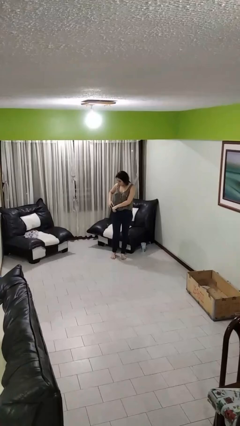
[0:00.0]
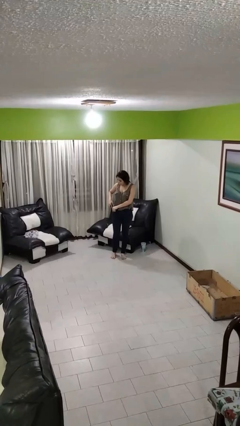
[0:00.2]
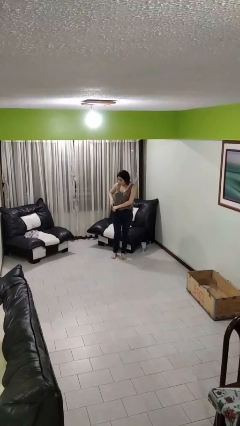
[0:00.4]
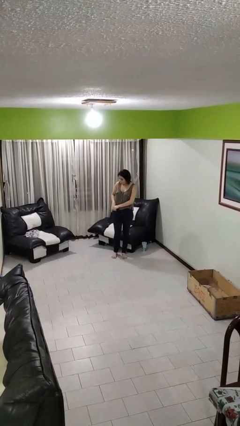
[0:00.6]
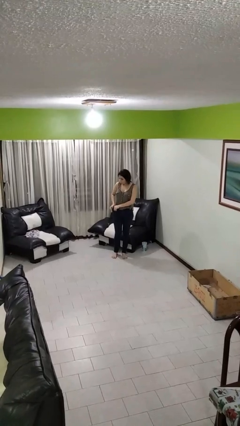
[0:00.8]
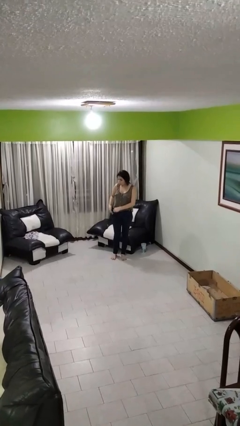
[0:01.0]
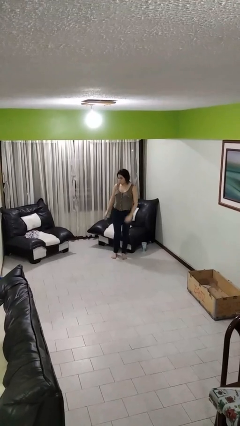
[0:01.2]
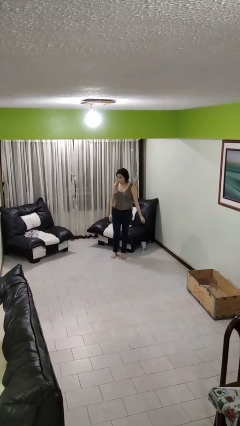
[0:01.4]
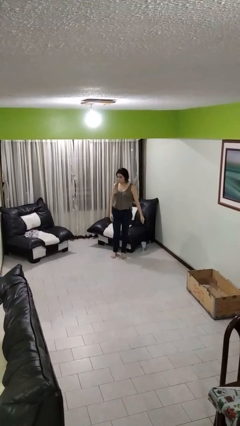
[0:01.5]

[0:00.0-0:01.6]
person puts phone into pocket

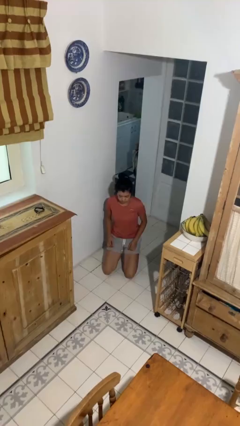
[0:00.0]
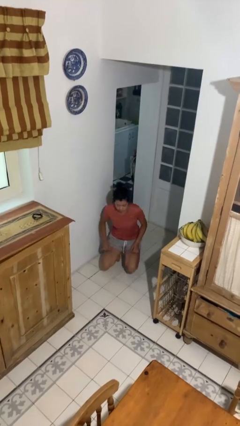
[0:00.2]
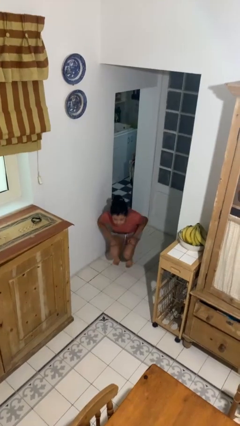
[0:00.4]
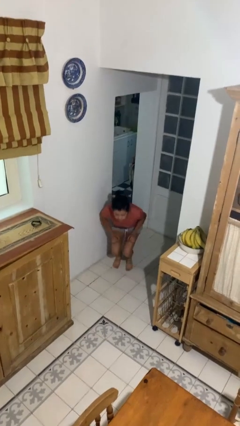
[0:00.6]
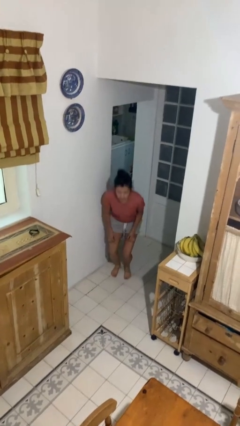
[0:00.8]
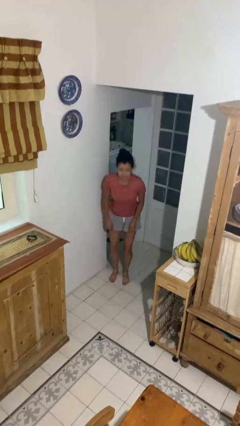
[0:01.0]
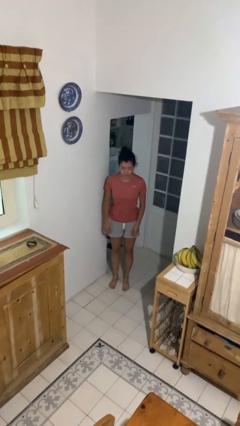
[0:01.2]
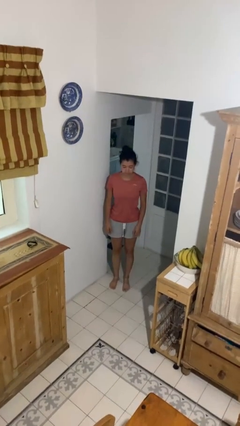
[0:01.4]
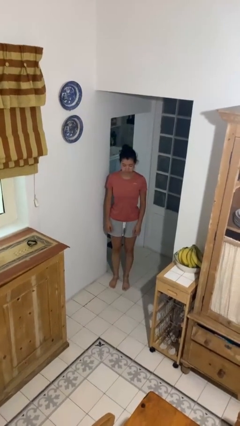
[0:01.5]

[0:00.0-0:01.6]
person stands up from floor

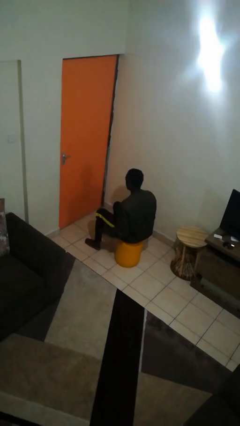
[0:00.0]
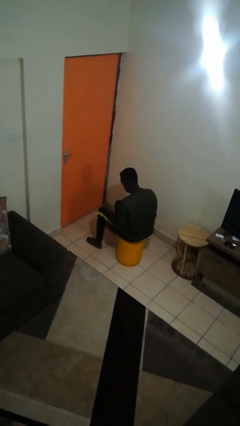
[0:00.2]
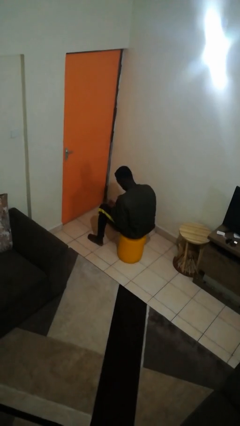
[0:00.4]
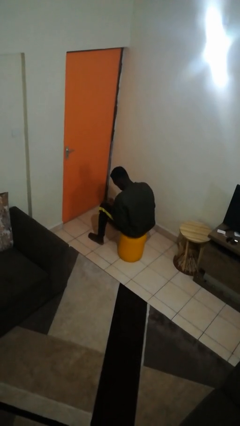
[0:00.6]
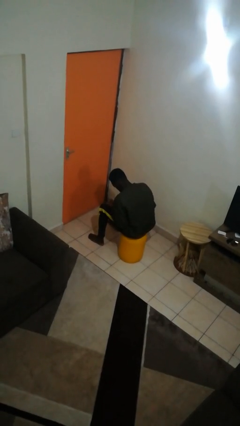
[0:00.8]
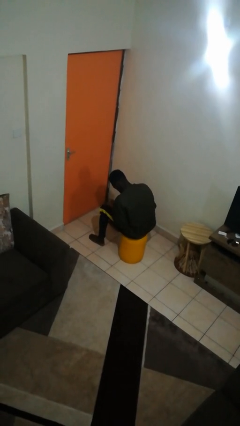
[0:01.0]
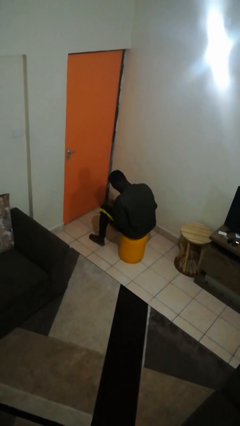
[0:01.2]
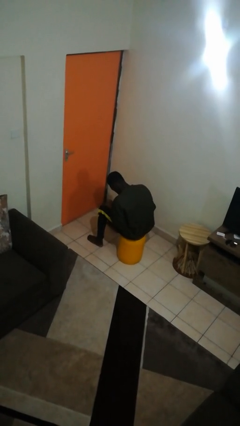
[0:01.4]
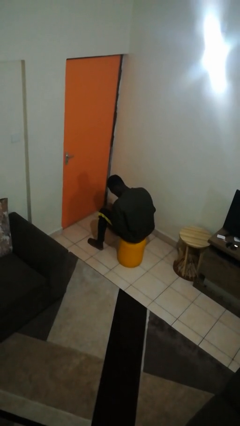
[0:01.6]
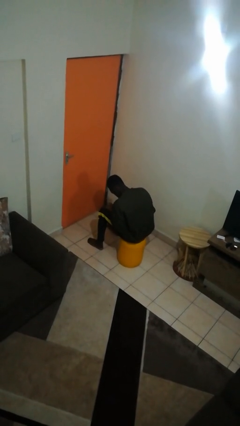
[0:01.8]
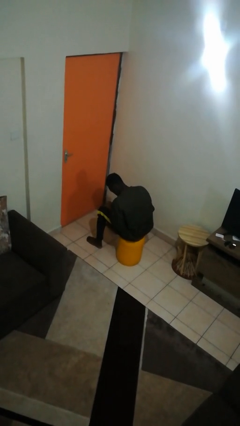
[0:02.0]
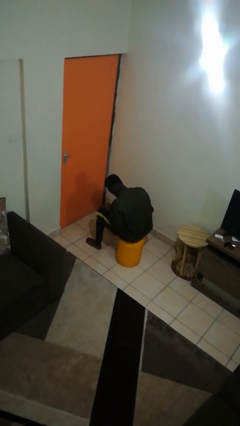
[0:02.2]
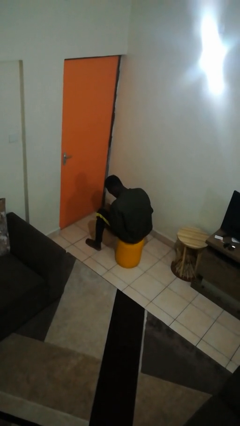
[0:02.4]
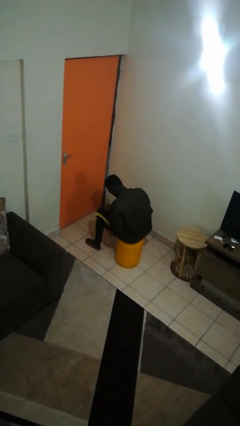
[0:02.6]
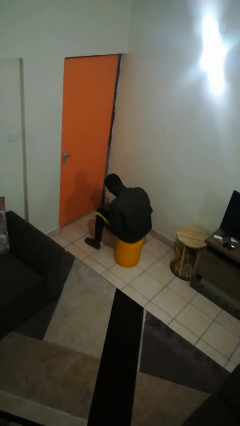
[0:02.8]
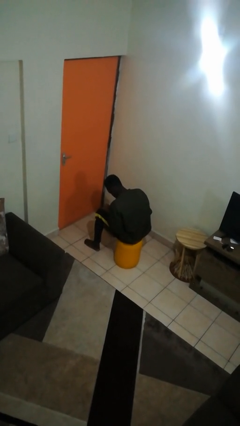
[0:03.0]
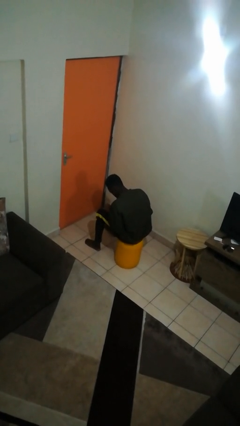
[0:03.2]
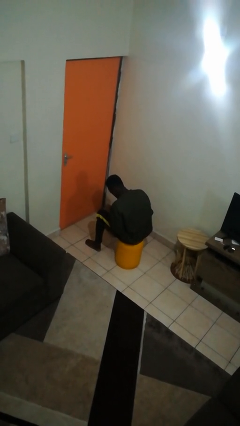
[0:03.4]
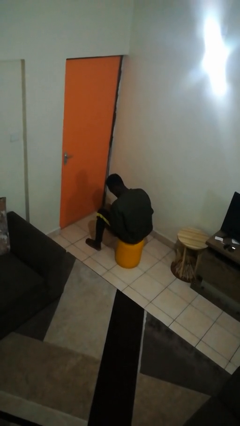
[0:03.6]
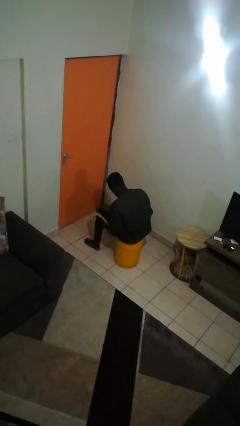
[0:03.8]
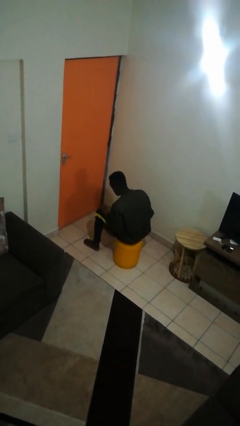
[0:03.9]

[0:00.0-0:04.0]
person looks at hands in lap

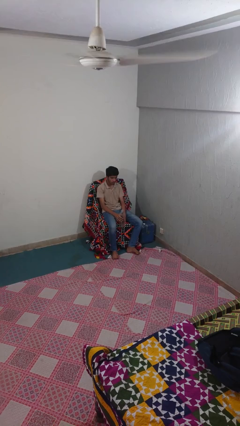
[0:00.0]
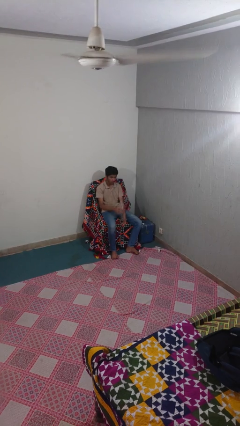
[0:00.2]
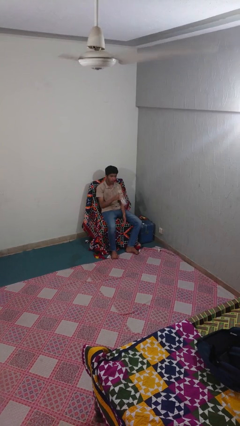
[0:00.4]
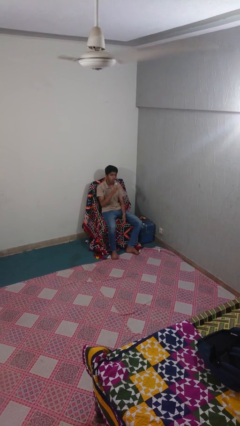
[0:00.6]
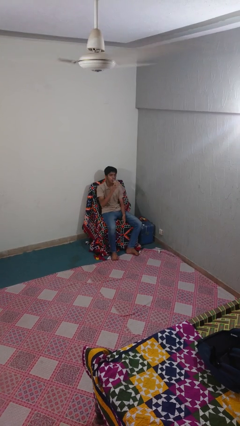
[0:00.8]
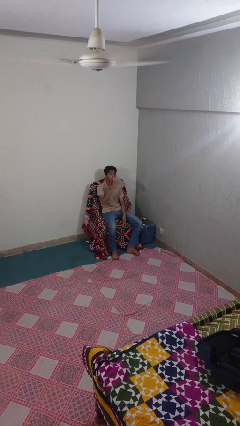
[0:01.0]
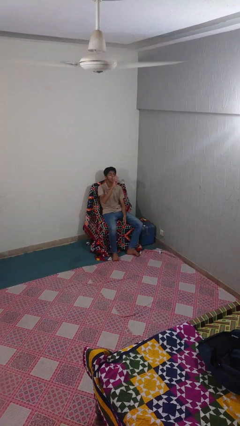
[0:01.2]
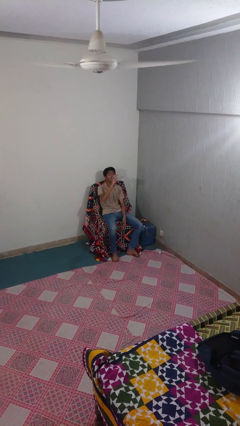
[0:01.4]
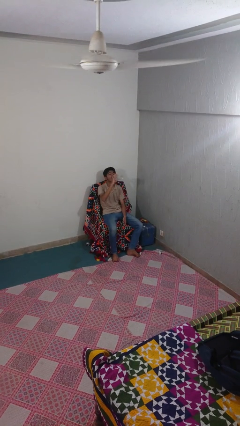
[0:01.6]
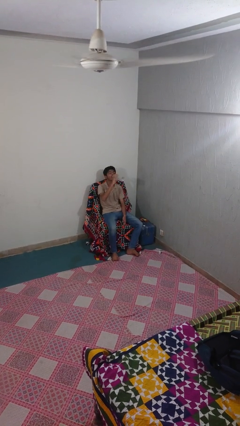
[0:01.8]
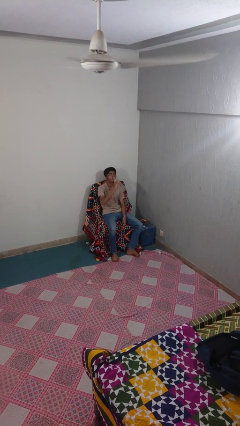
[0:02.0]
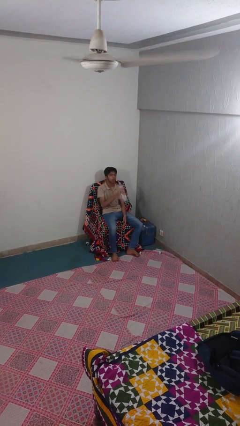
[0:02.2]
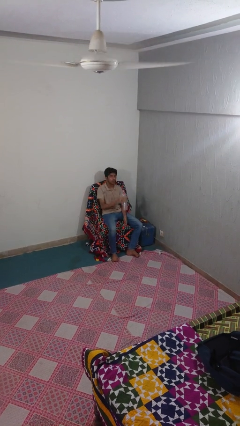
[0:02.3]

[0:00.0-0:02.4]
person drinks from bottle

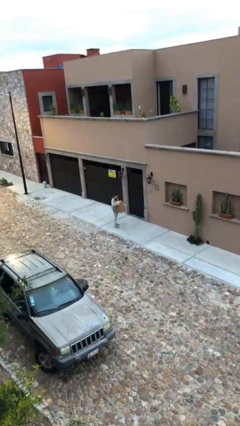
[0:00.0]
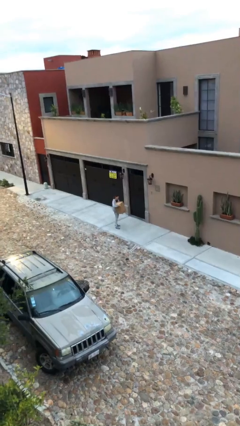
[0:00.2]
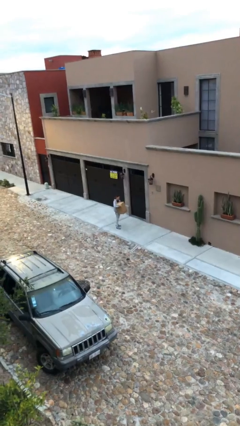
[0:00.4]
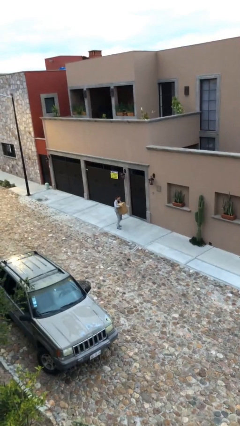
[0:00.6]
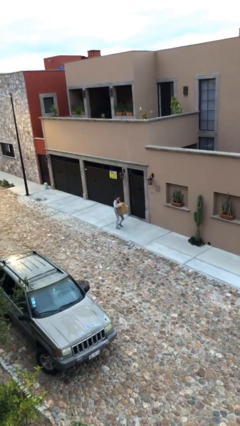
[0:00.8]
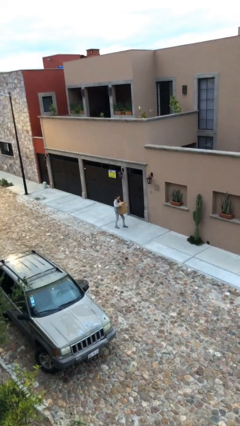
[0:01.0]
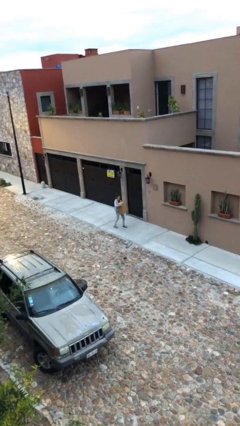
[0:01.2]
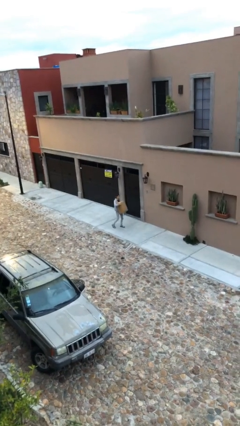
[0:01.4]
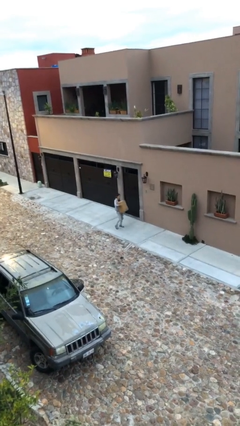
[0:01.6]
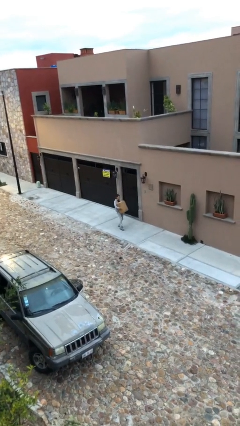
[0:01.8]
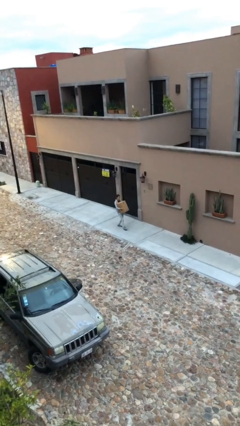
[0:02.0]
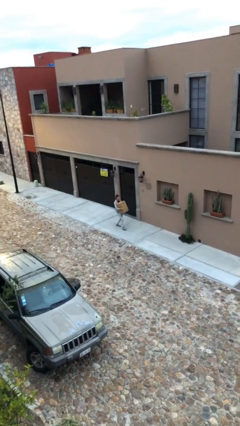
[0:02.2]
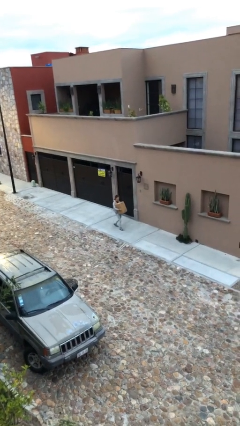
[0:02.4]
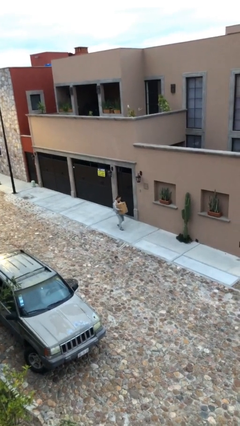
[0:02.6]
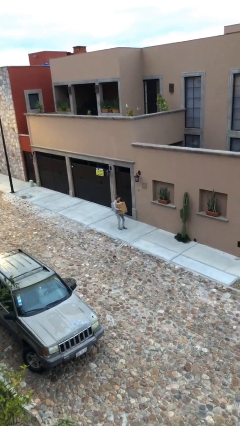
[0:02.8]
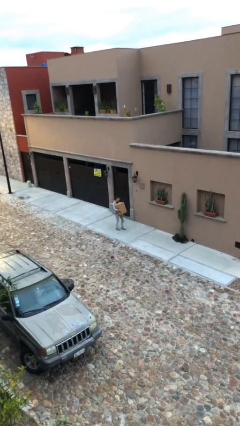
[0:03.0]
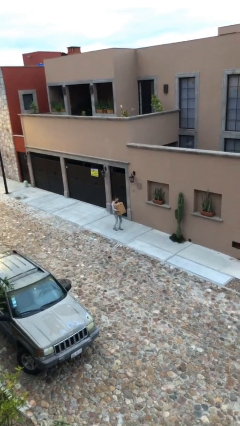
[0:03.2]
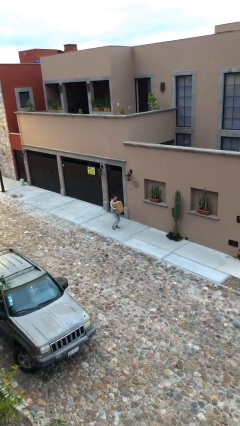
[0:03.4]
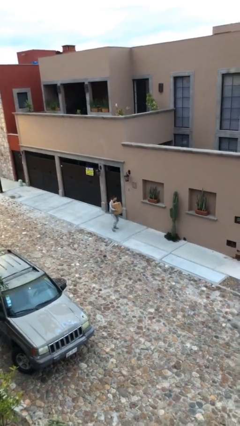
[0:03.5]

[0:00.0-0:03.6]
person carries heavy object

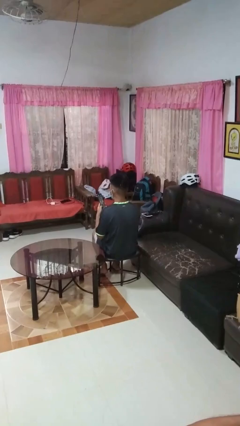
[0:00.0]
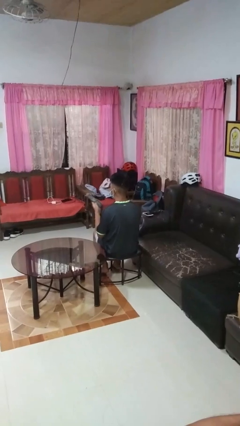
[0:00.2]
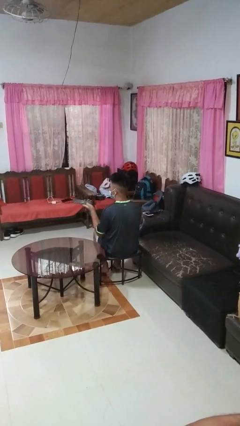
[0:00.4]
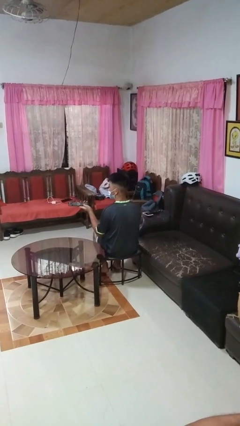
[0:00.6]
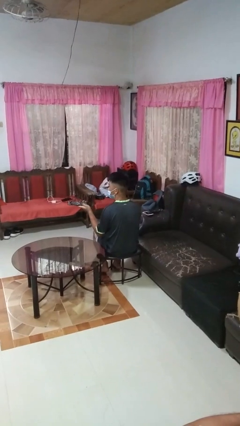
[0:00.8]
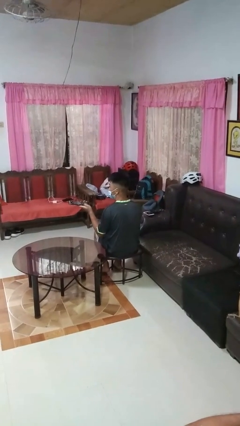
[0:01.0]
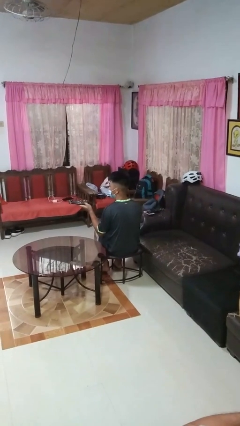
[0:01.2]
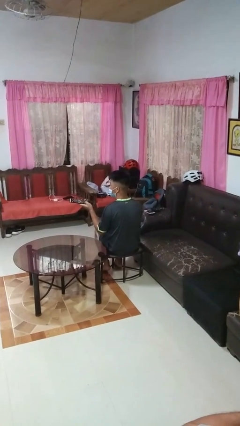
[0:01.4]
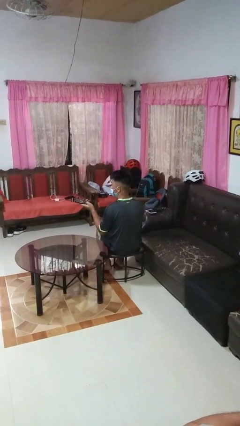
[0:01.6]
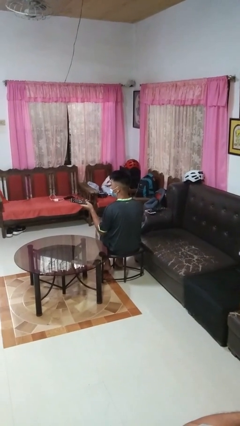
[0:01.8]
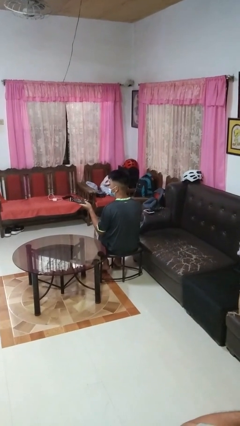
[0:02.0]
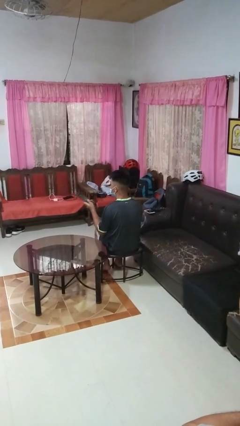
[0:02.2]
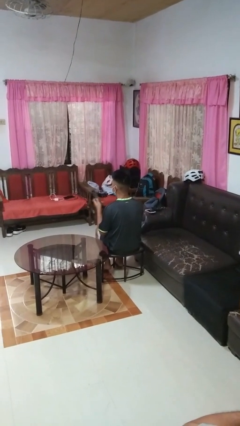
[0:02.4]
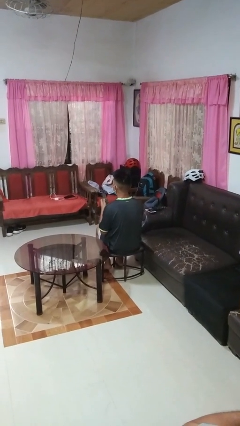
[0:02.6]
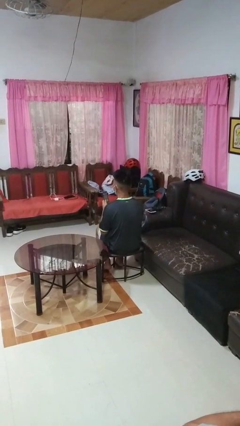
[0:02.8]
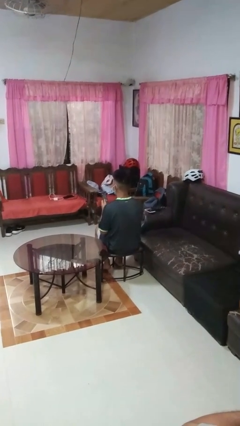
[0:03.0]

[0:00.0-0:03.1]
person uses television remote

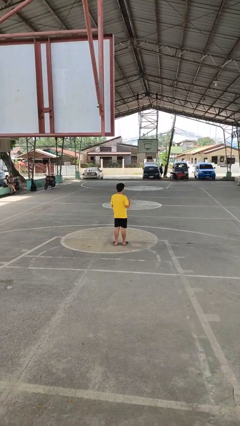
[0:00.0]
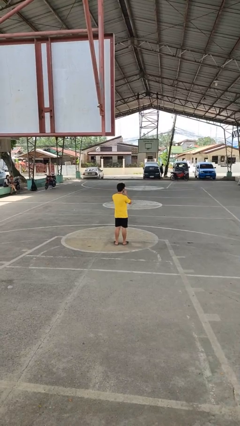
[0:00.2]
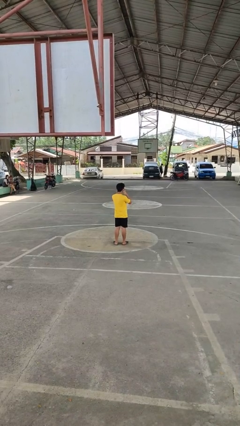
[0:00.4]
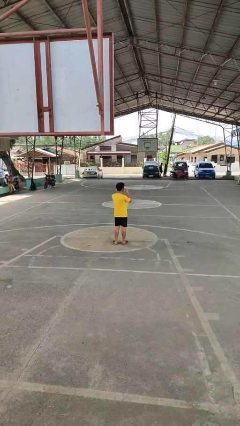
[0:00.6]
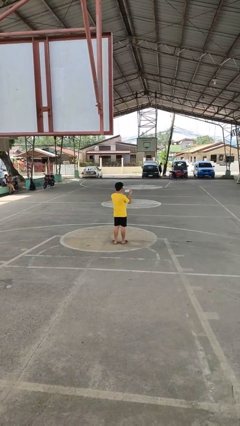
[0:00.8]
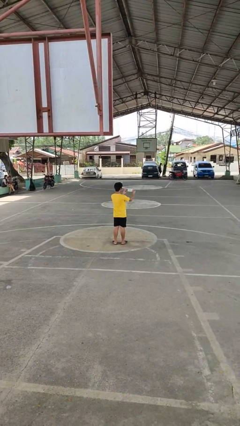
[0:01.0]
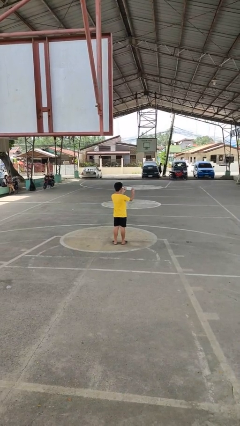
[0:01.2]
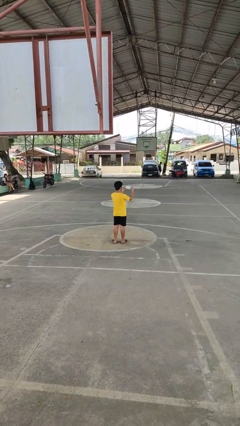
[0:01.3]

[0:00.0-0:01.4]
person takes off facemask
